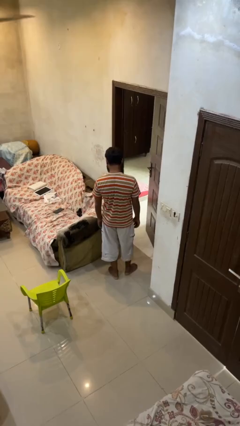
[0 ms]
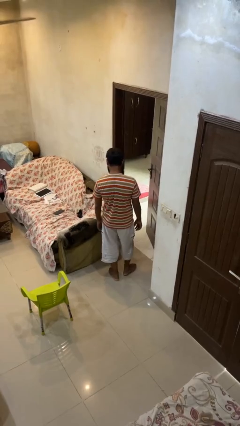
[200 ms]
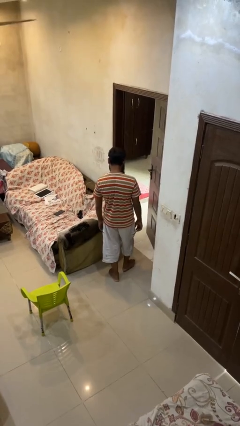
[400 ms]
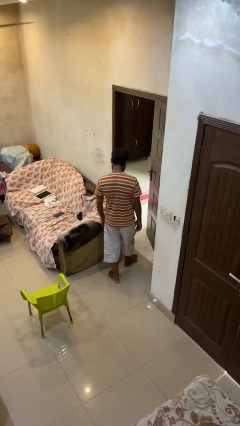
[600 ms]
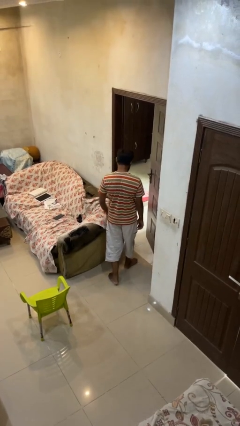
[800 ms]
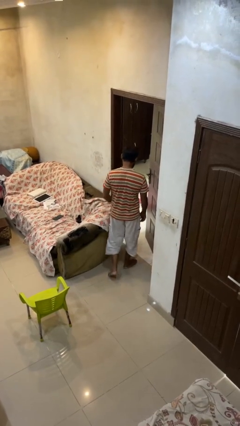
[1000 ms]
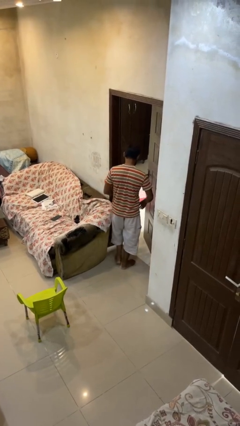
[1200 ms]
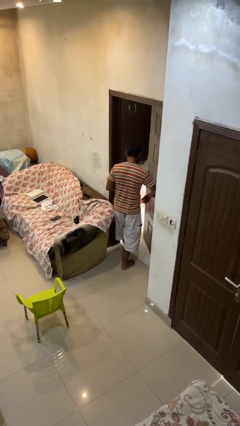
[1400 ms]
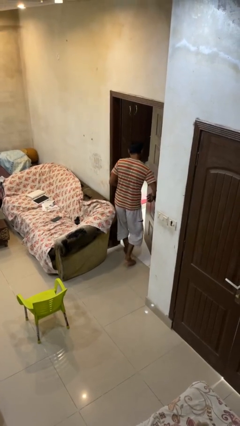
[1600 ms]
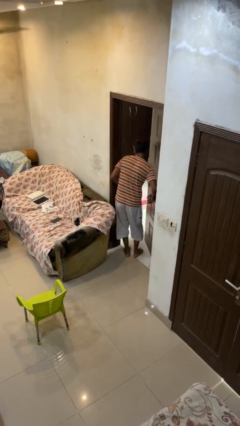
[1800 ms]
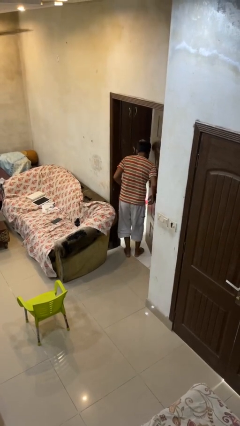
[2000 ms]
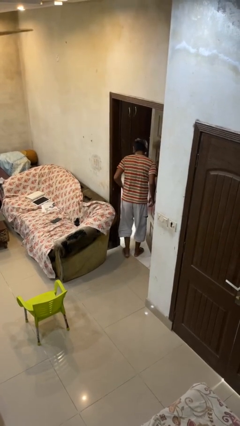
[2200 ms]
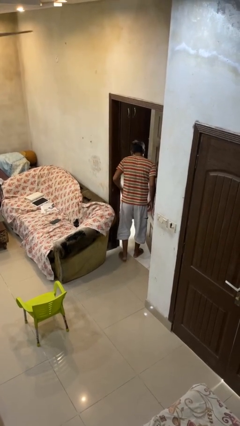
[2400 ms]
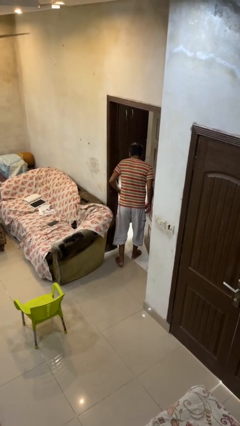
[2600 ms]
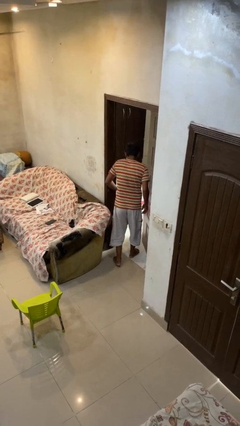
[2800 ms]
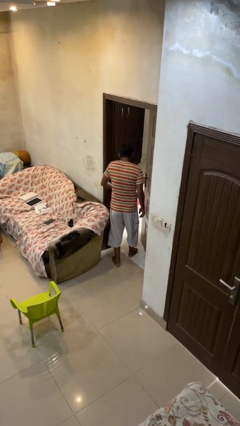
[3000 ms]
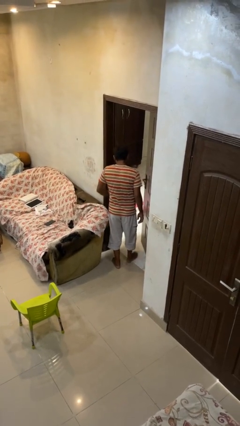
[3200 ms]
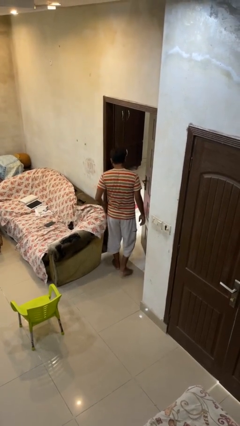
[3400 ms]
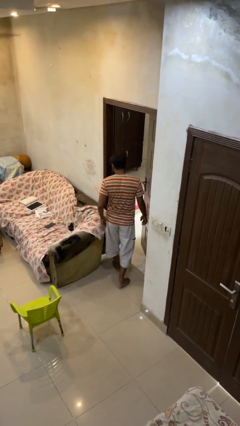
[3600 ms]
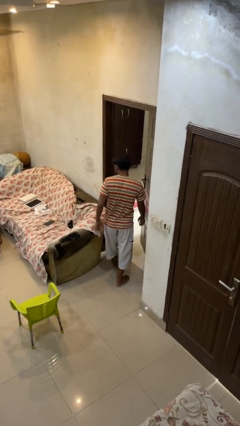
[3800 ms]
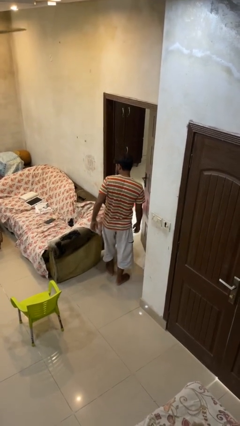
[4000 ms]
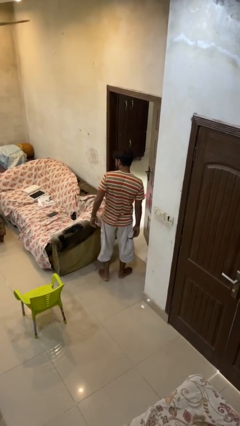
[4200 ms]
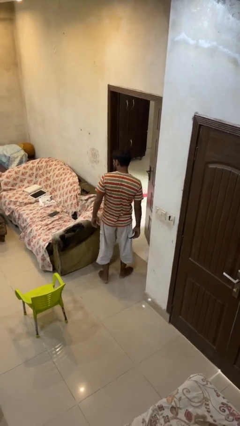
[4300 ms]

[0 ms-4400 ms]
person bumps into wall

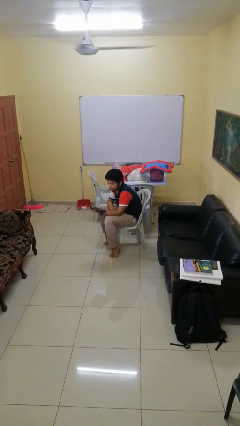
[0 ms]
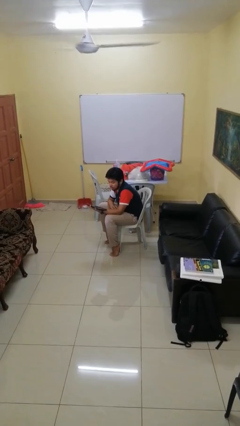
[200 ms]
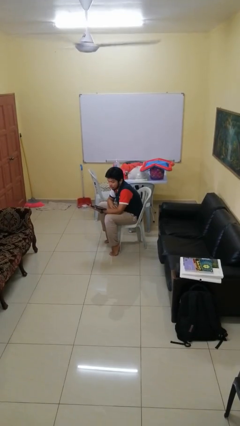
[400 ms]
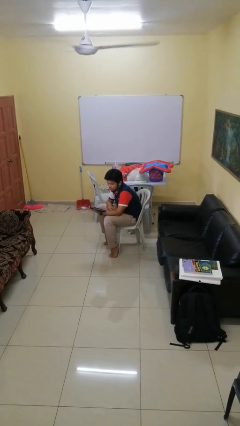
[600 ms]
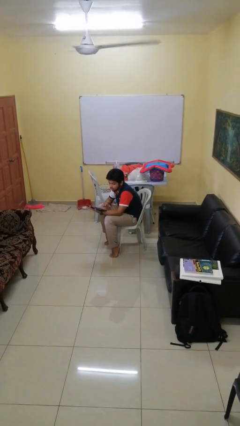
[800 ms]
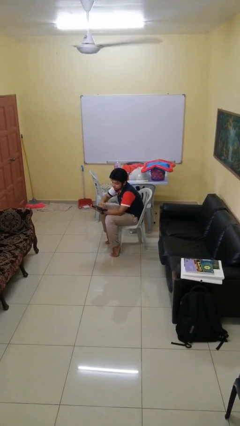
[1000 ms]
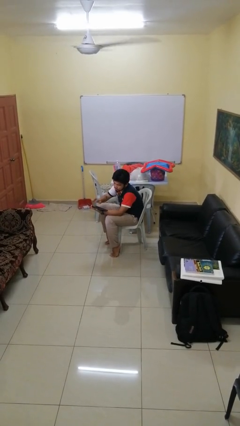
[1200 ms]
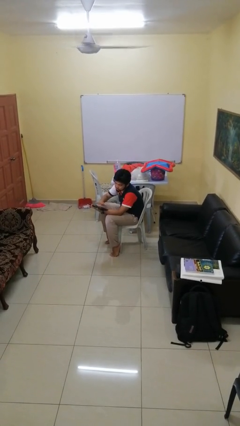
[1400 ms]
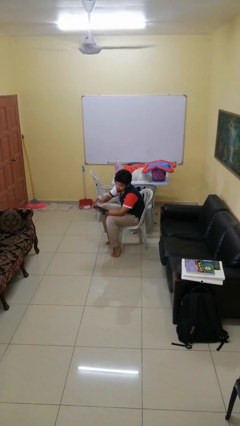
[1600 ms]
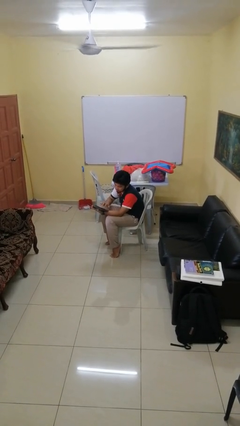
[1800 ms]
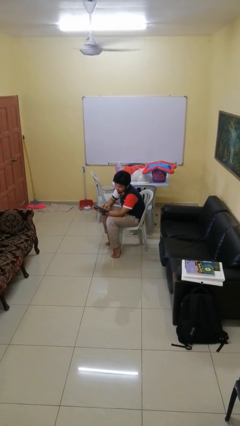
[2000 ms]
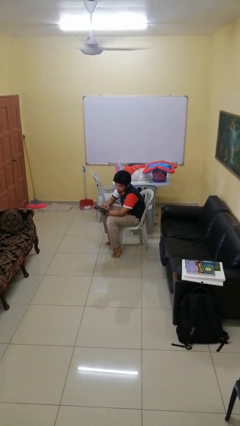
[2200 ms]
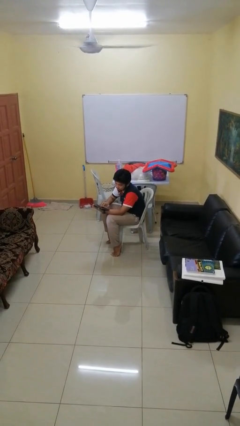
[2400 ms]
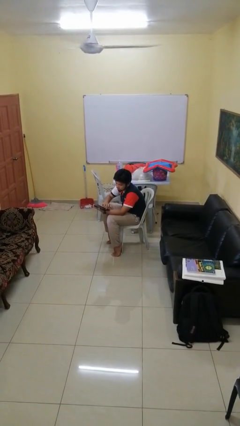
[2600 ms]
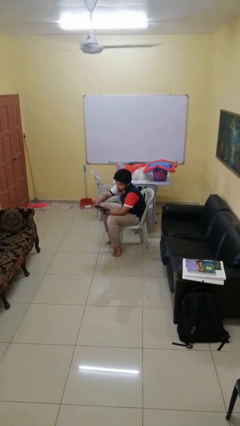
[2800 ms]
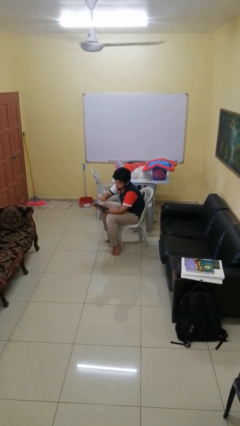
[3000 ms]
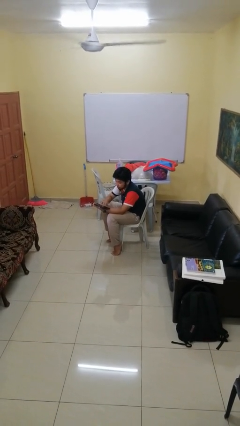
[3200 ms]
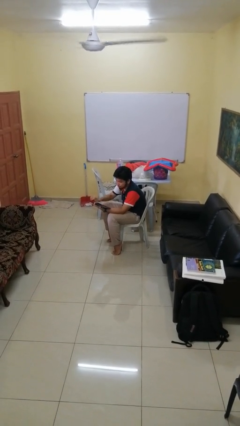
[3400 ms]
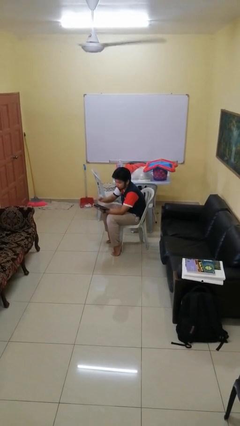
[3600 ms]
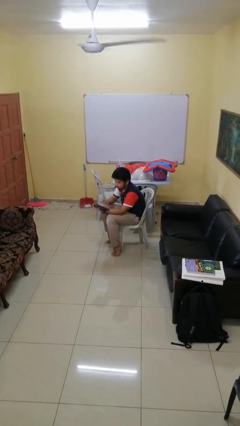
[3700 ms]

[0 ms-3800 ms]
person interacts with tablet

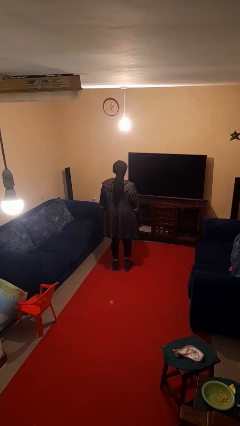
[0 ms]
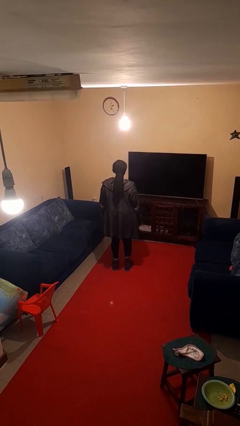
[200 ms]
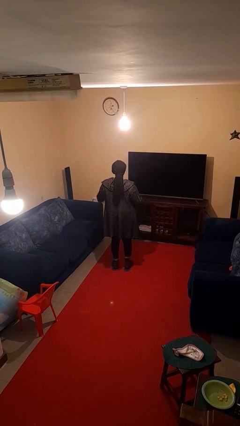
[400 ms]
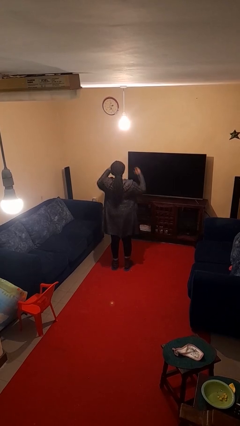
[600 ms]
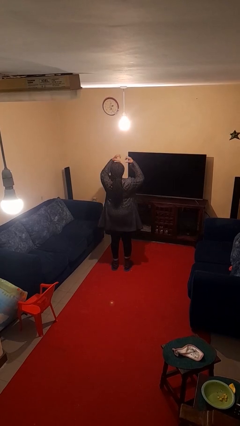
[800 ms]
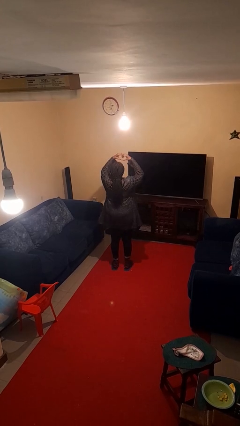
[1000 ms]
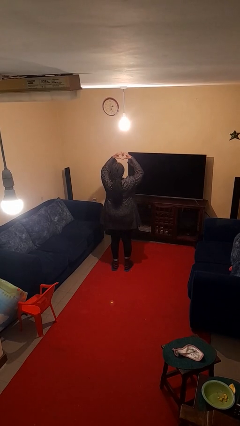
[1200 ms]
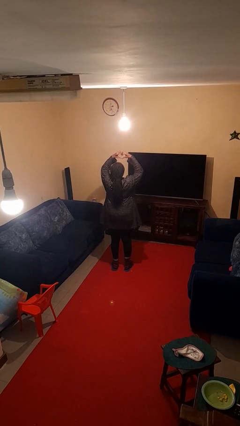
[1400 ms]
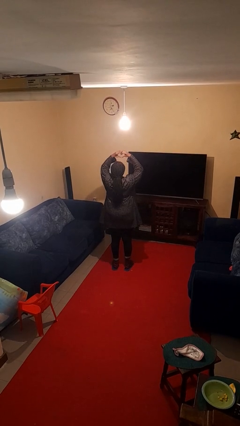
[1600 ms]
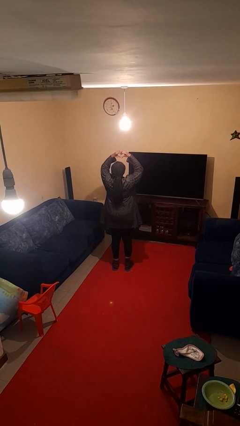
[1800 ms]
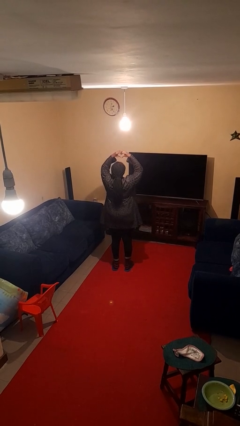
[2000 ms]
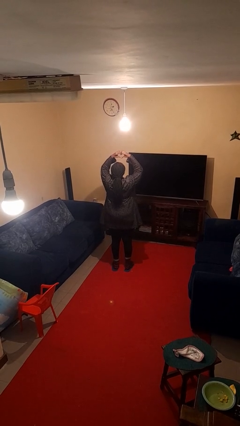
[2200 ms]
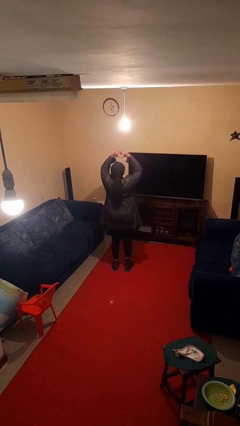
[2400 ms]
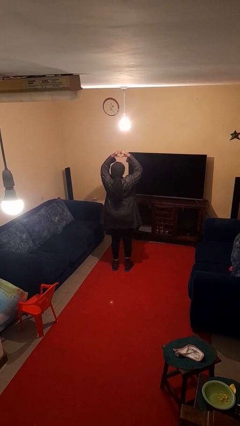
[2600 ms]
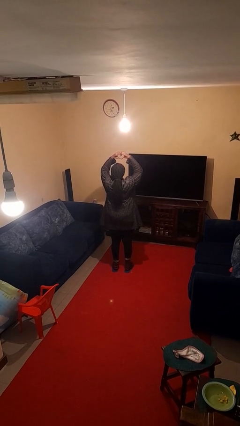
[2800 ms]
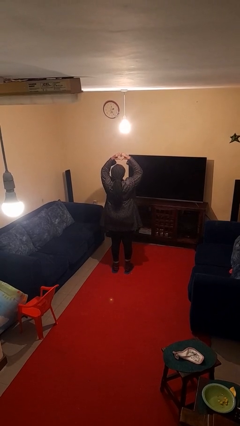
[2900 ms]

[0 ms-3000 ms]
person gestures heart

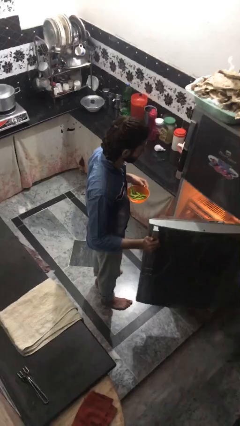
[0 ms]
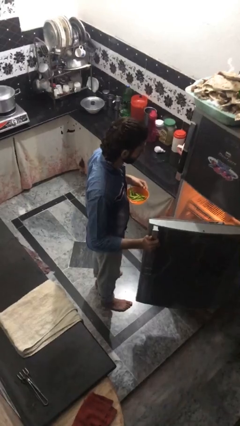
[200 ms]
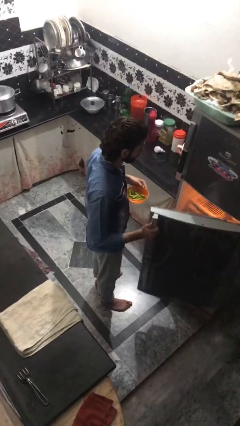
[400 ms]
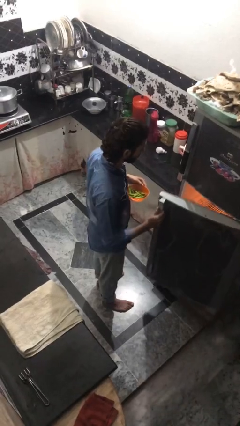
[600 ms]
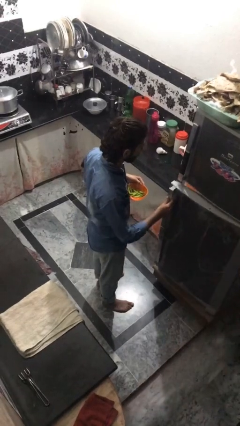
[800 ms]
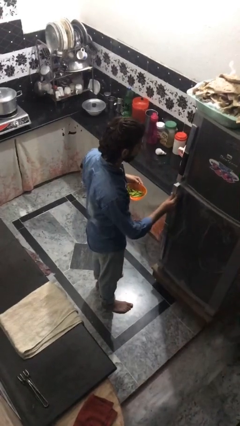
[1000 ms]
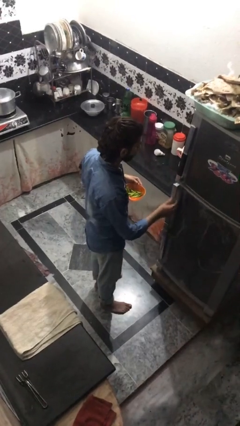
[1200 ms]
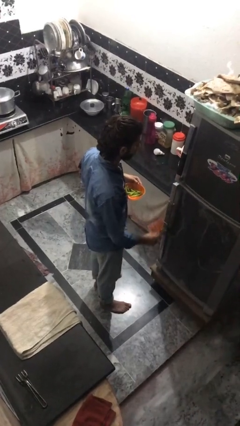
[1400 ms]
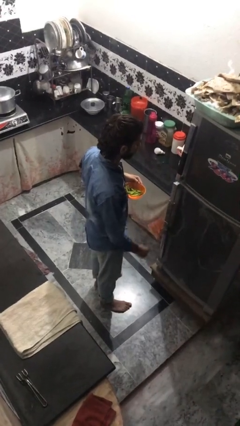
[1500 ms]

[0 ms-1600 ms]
person closes refrigerator

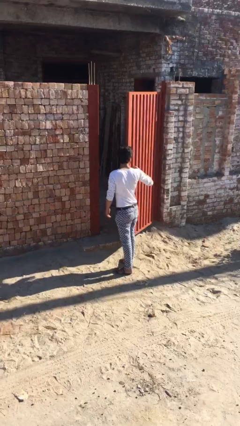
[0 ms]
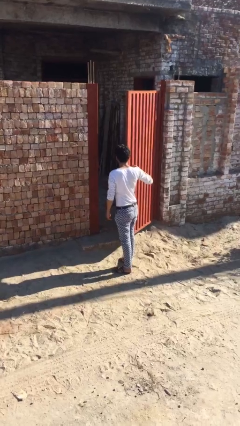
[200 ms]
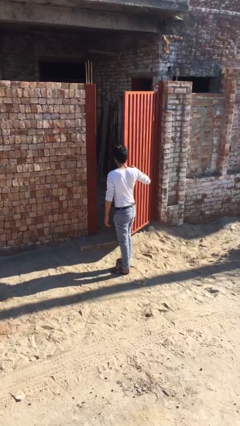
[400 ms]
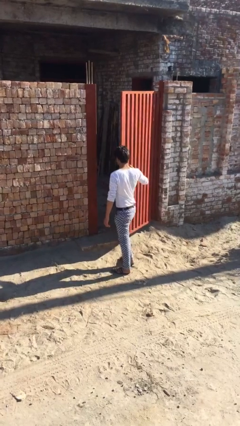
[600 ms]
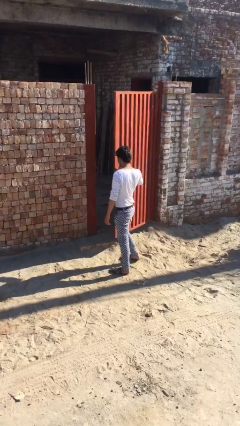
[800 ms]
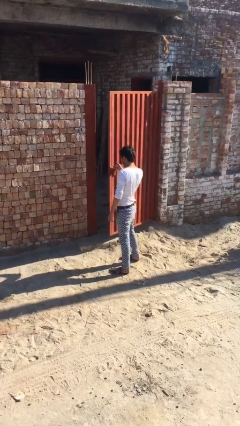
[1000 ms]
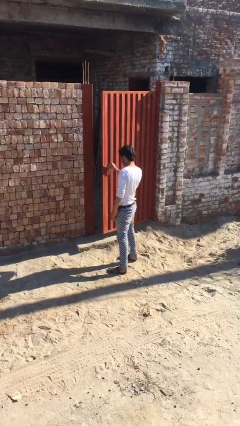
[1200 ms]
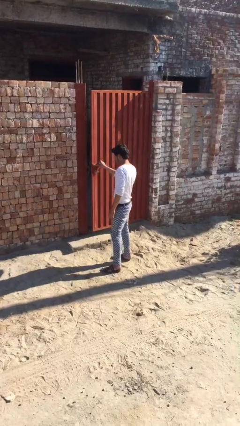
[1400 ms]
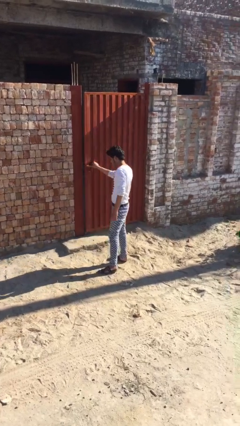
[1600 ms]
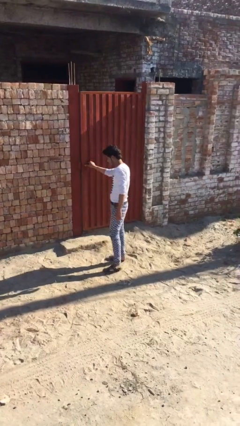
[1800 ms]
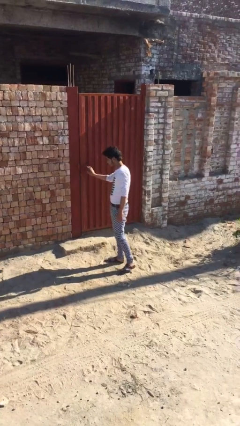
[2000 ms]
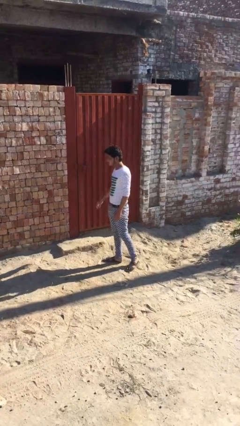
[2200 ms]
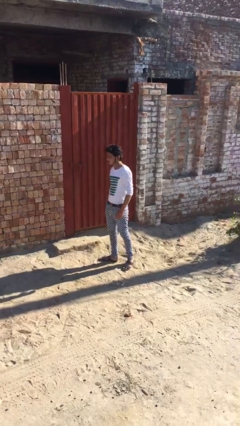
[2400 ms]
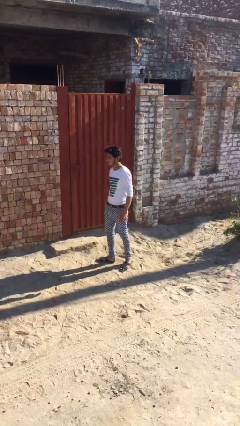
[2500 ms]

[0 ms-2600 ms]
person closes facility door

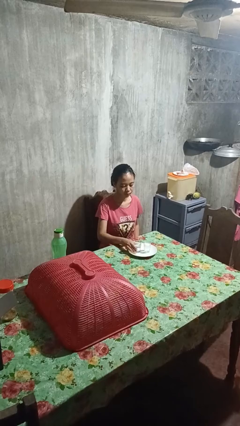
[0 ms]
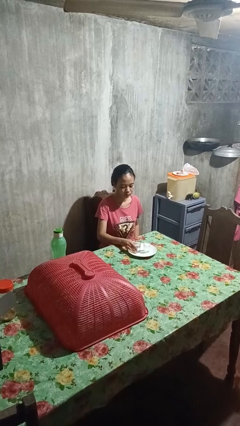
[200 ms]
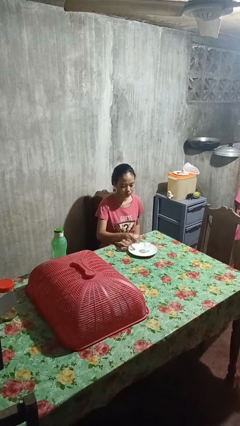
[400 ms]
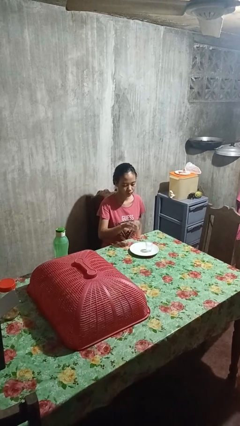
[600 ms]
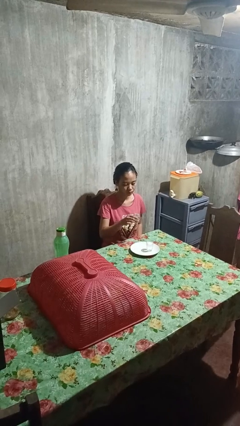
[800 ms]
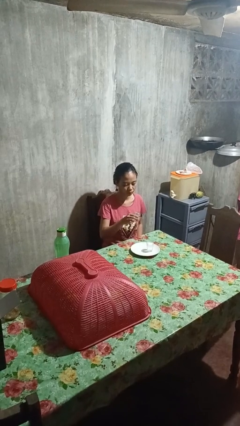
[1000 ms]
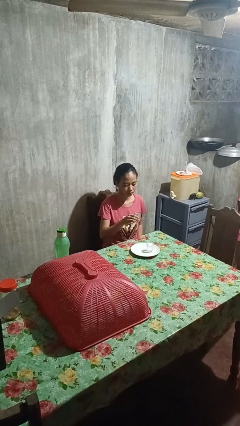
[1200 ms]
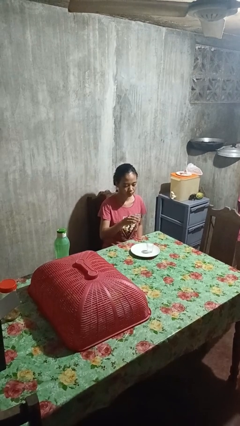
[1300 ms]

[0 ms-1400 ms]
person picks up object from table

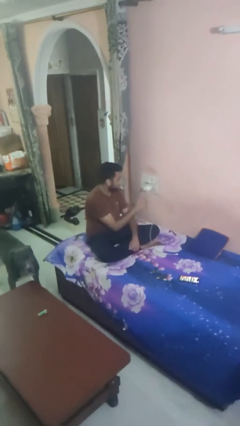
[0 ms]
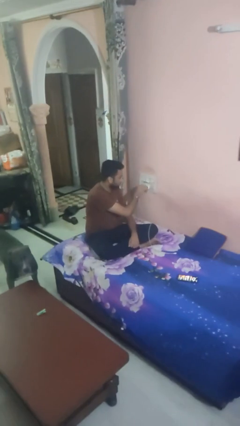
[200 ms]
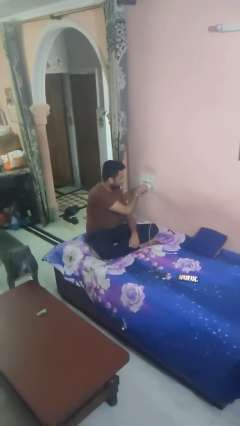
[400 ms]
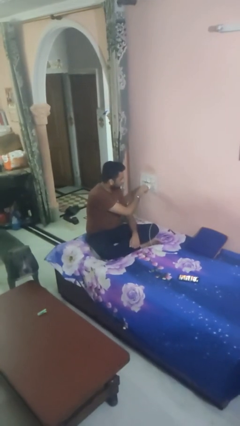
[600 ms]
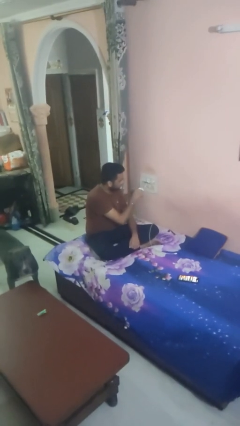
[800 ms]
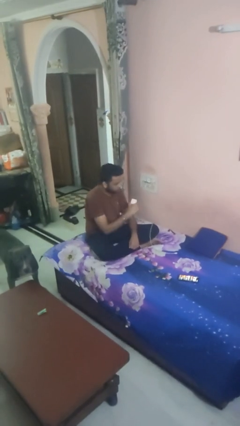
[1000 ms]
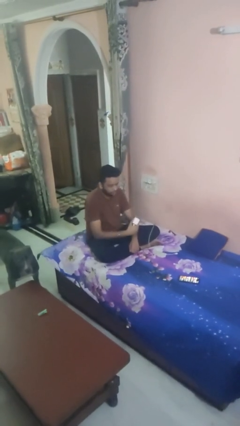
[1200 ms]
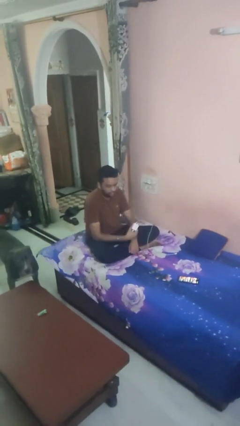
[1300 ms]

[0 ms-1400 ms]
person unplugs from electrical socket
